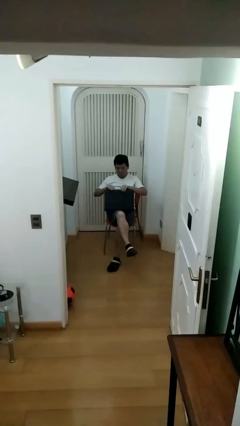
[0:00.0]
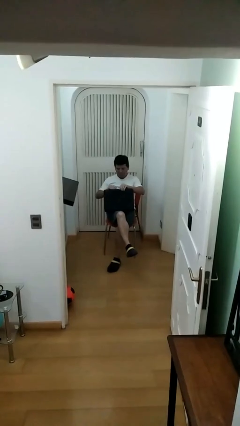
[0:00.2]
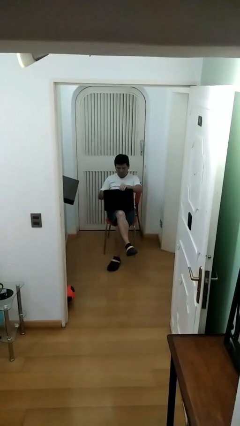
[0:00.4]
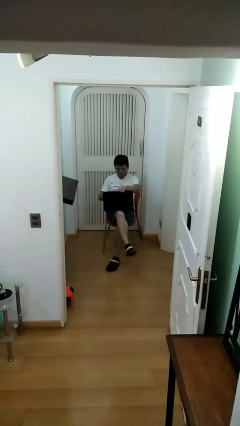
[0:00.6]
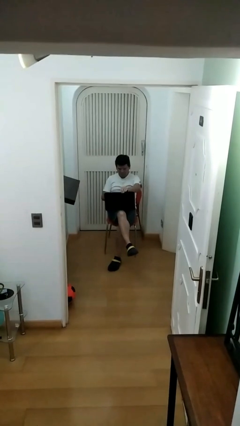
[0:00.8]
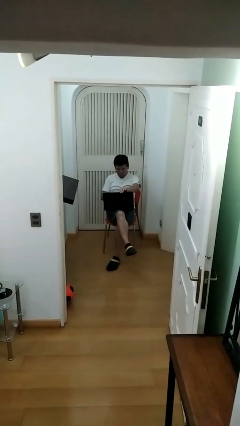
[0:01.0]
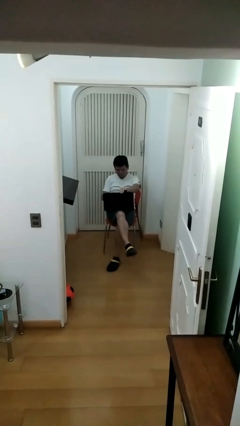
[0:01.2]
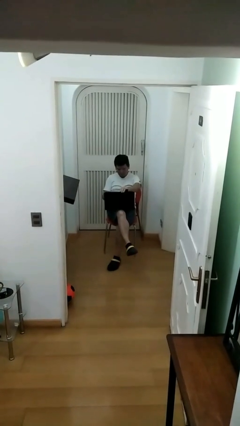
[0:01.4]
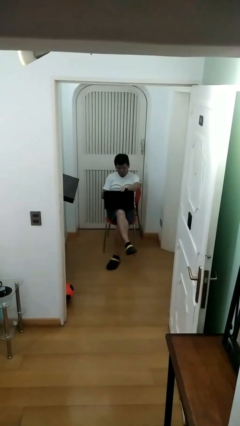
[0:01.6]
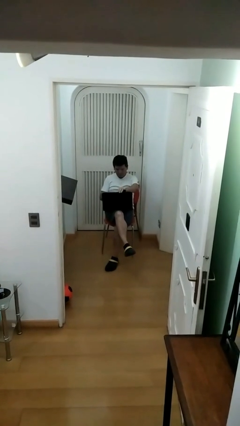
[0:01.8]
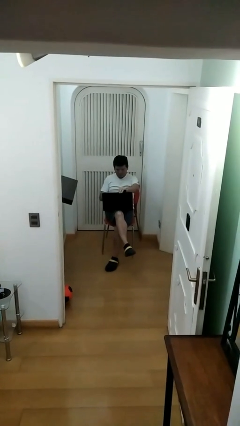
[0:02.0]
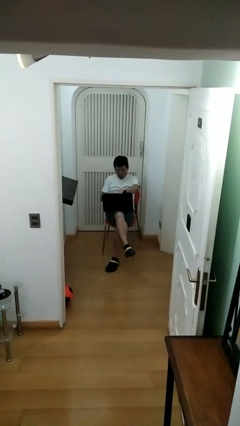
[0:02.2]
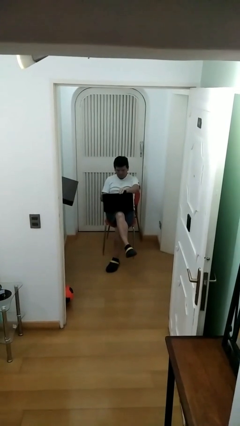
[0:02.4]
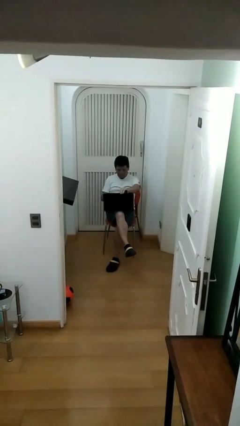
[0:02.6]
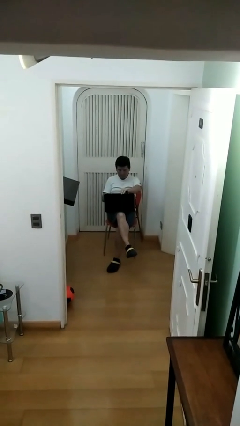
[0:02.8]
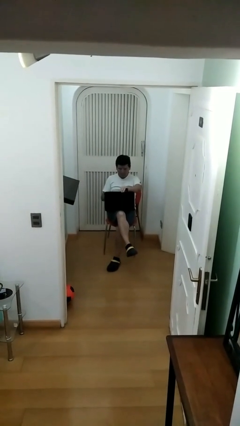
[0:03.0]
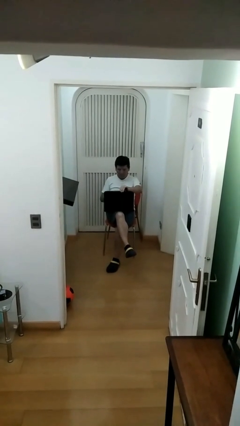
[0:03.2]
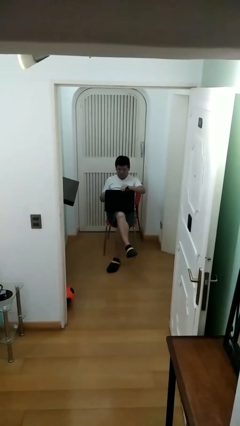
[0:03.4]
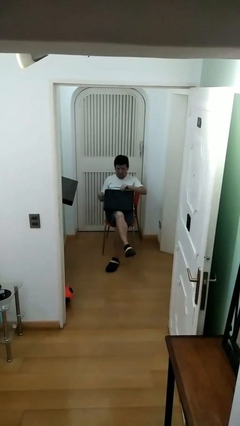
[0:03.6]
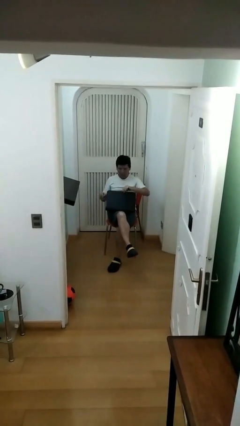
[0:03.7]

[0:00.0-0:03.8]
person interacts with laptop

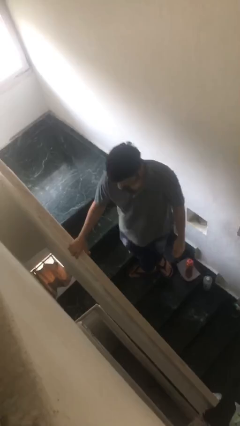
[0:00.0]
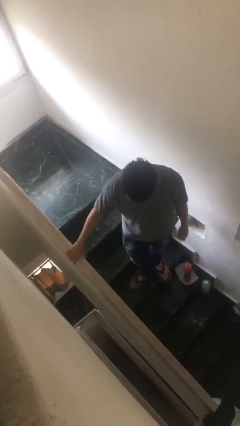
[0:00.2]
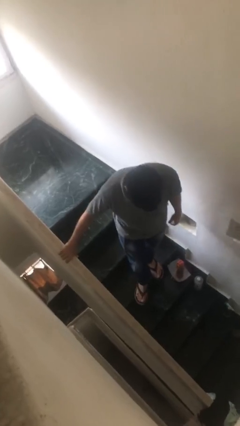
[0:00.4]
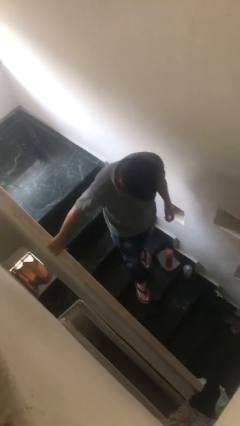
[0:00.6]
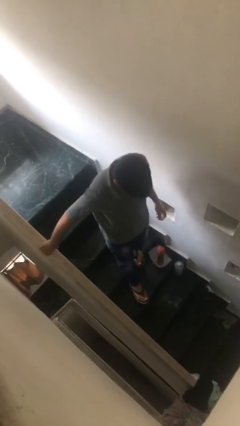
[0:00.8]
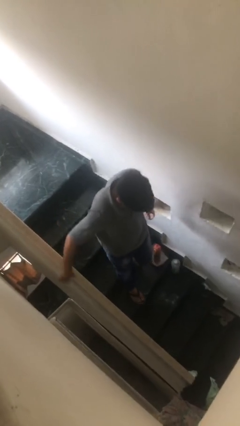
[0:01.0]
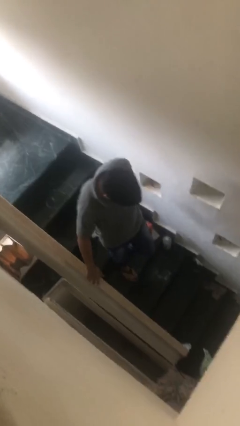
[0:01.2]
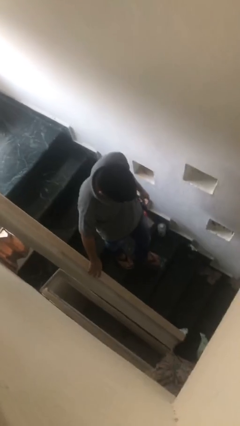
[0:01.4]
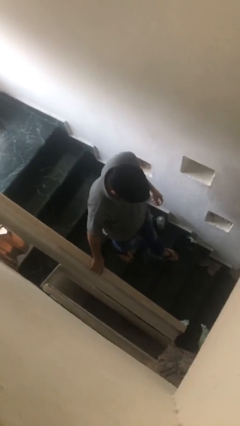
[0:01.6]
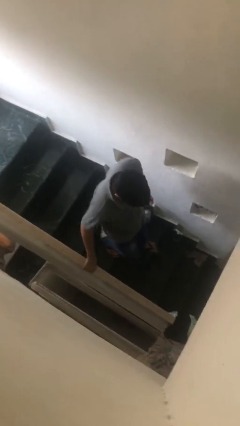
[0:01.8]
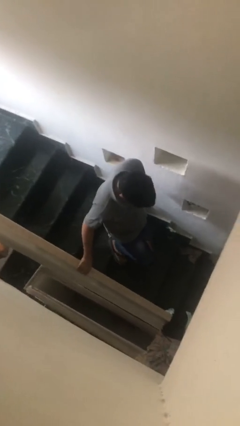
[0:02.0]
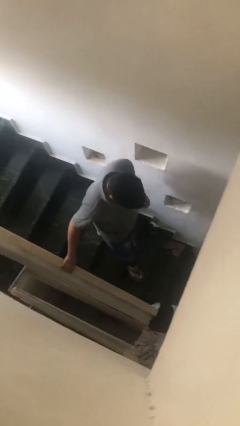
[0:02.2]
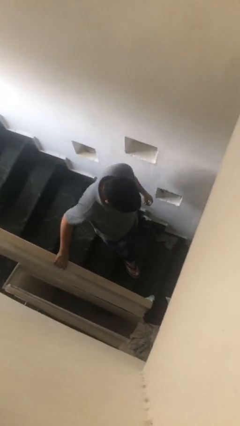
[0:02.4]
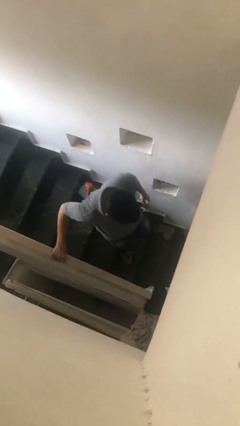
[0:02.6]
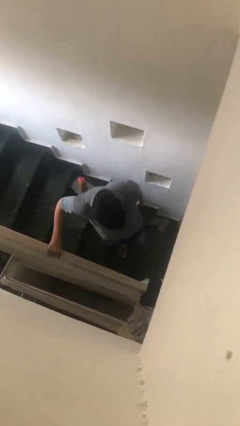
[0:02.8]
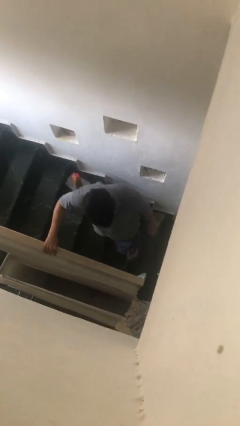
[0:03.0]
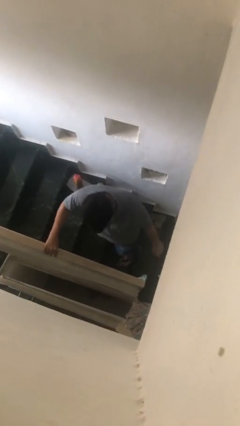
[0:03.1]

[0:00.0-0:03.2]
person climbs down stairs

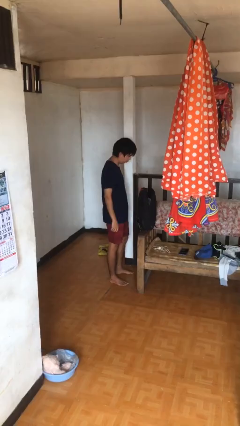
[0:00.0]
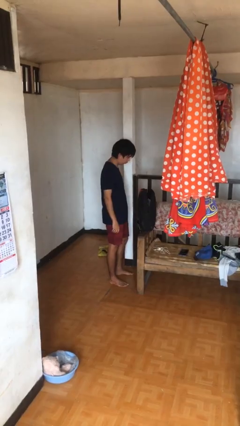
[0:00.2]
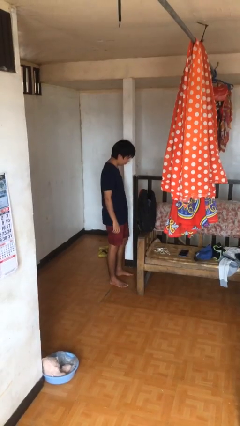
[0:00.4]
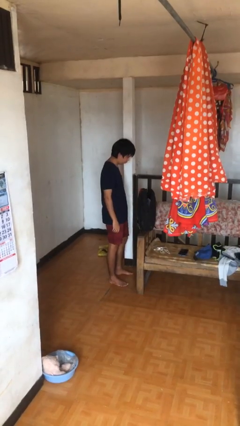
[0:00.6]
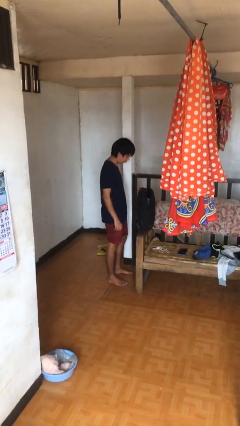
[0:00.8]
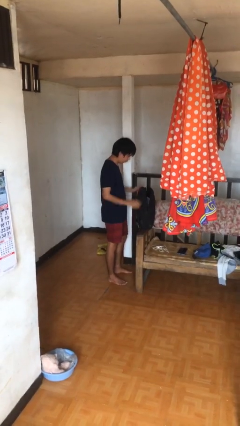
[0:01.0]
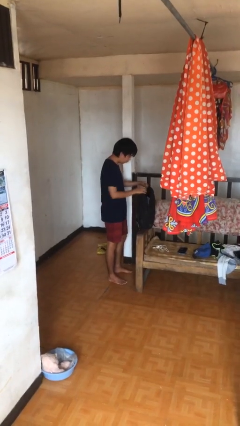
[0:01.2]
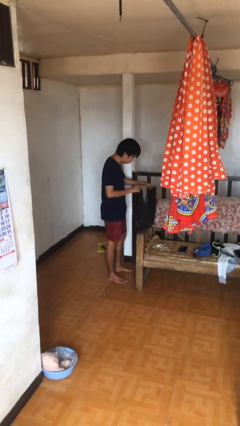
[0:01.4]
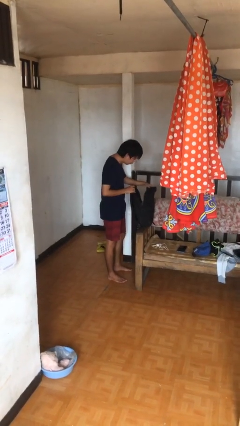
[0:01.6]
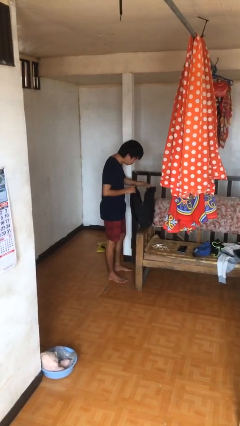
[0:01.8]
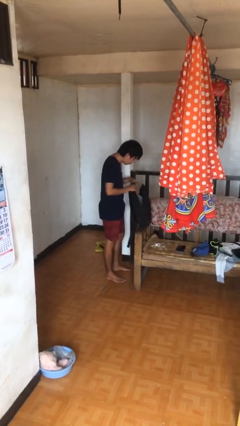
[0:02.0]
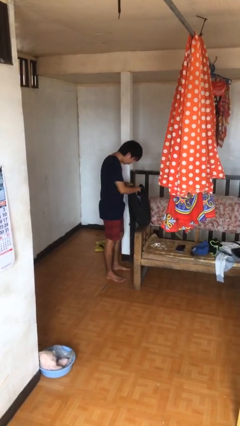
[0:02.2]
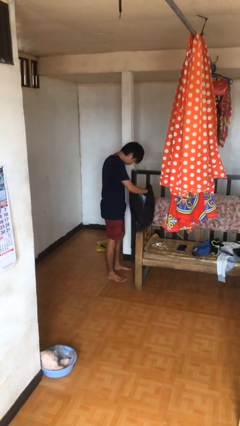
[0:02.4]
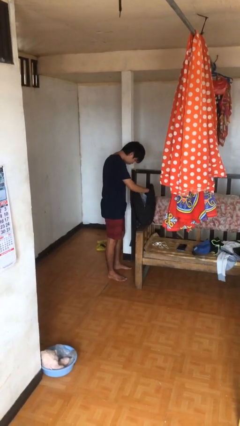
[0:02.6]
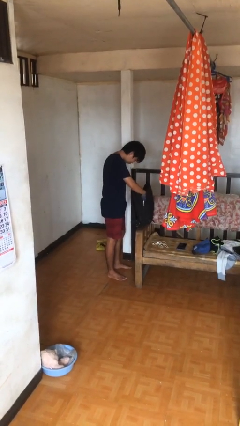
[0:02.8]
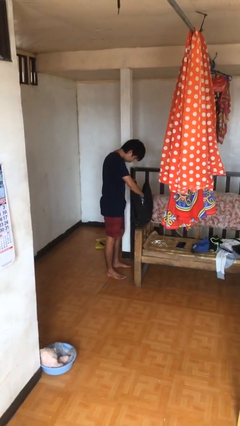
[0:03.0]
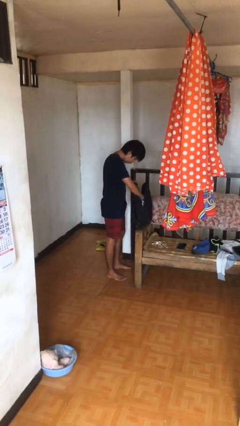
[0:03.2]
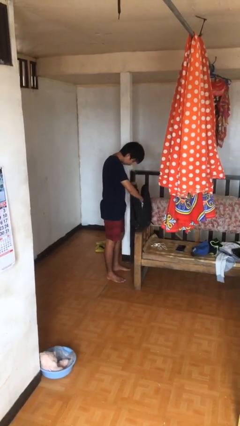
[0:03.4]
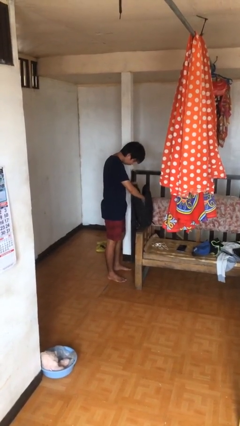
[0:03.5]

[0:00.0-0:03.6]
person searches in backpack

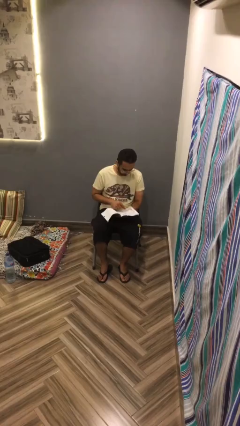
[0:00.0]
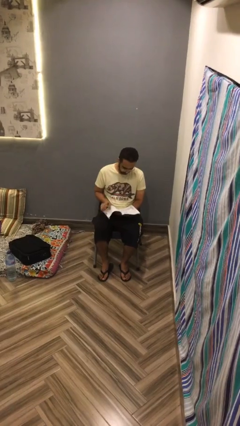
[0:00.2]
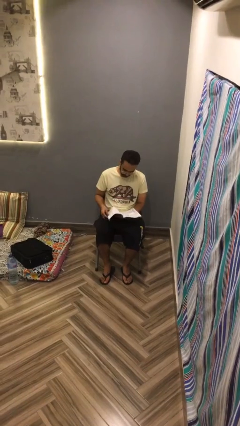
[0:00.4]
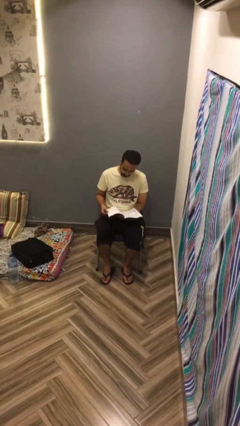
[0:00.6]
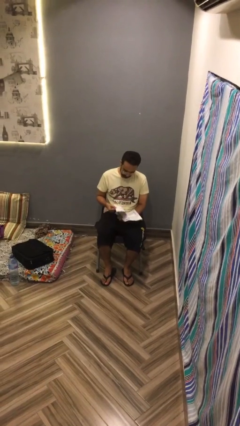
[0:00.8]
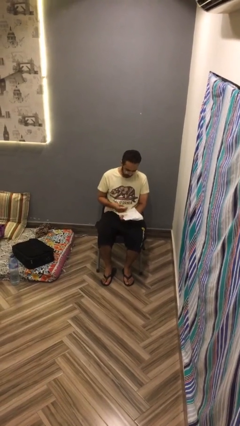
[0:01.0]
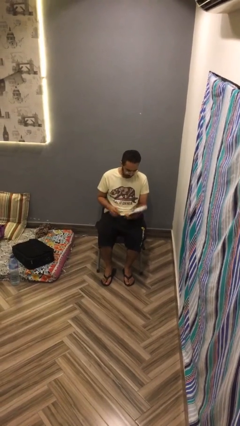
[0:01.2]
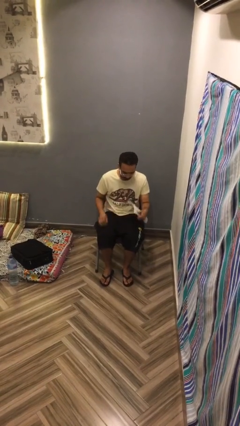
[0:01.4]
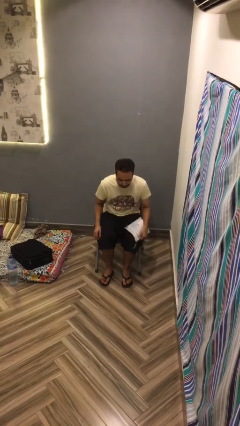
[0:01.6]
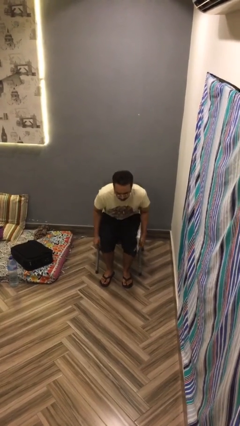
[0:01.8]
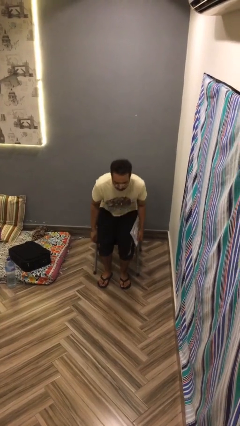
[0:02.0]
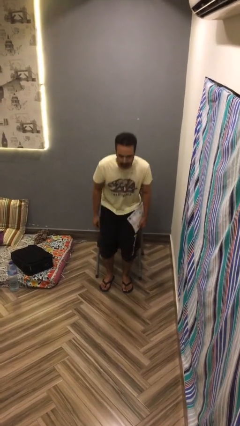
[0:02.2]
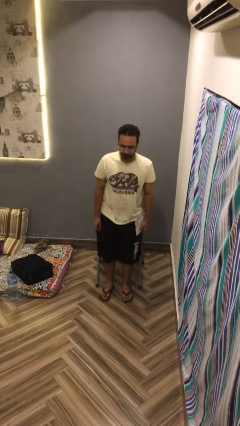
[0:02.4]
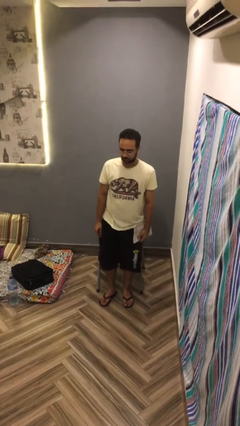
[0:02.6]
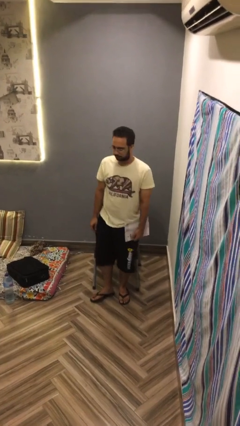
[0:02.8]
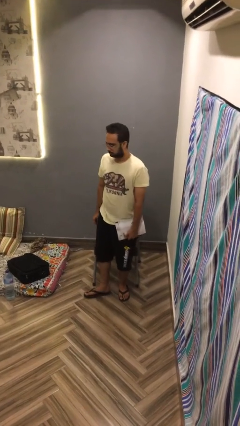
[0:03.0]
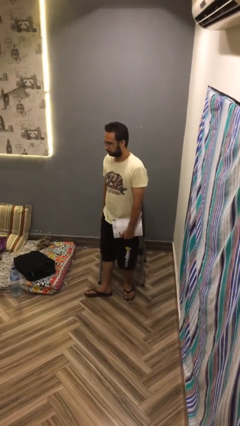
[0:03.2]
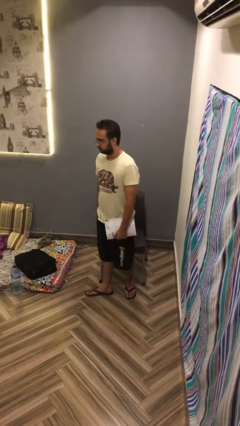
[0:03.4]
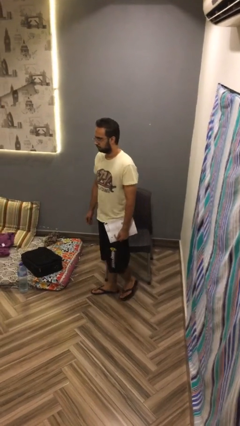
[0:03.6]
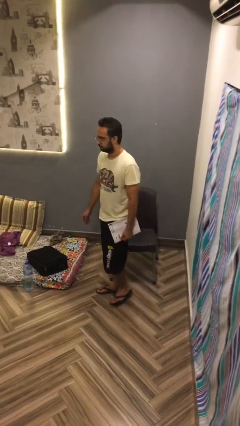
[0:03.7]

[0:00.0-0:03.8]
person stands up

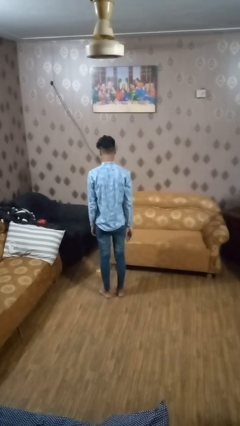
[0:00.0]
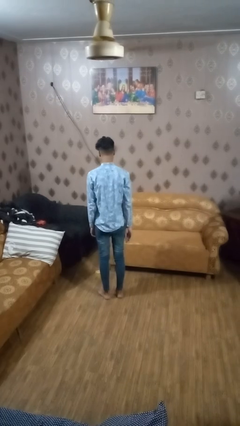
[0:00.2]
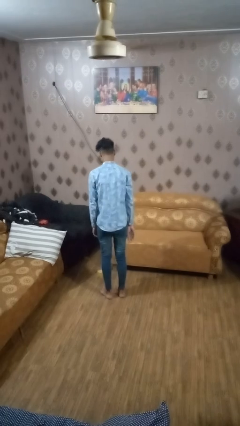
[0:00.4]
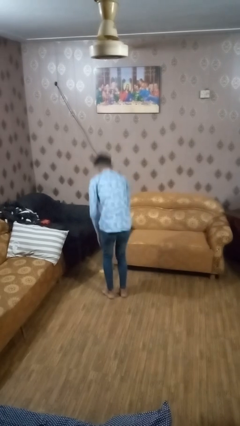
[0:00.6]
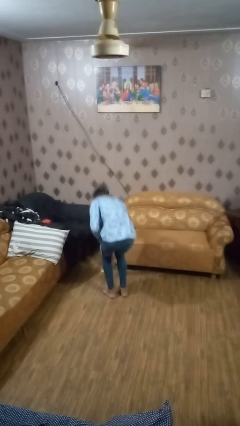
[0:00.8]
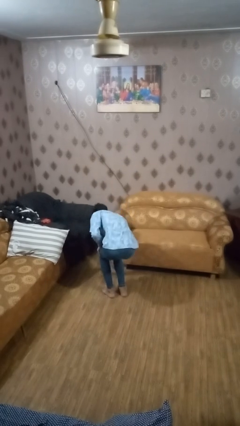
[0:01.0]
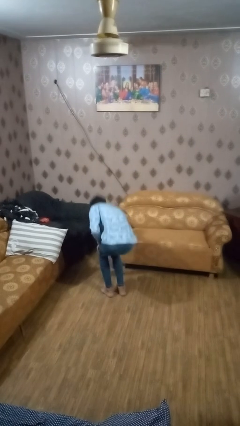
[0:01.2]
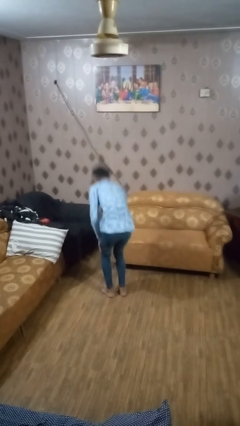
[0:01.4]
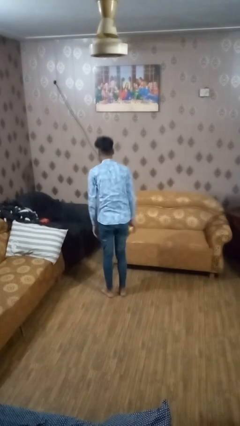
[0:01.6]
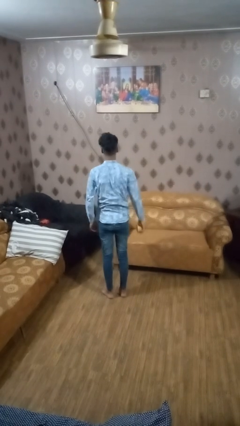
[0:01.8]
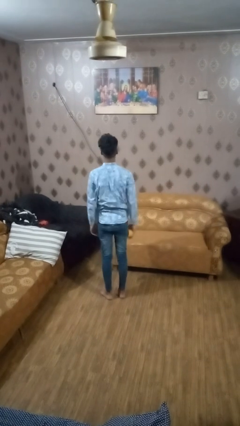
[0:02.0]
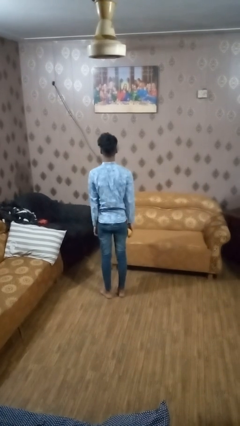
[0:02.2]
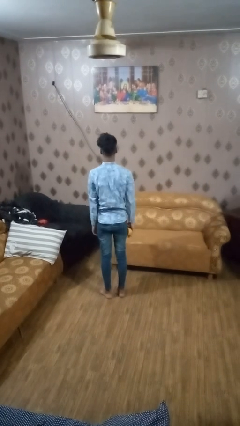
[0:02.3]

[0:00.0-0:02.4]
person picks up object from floor

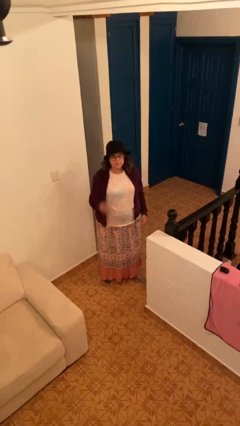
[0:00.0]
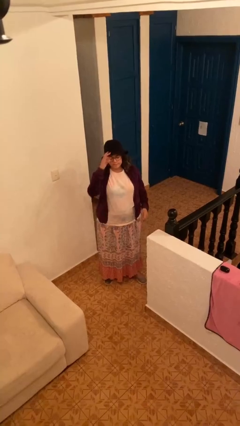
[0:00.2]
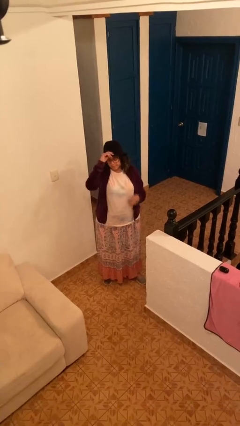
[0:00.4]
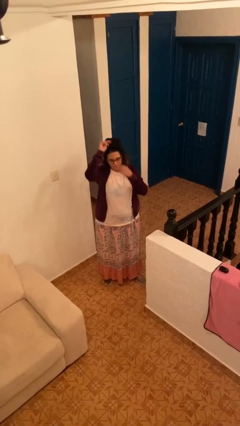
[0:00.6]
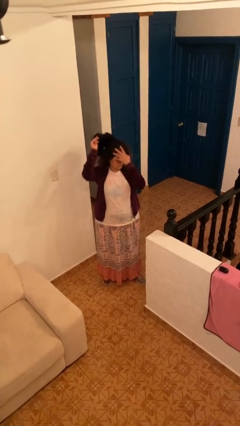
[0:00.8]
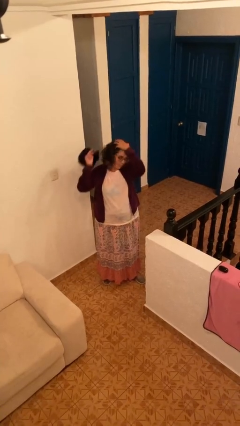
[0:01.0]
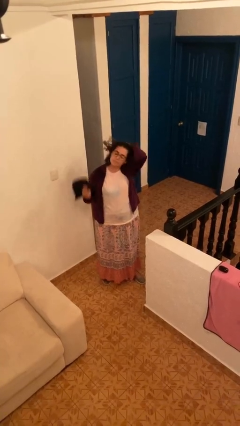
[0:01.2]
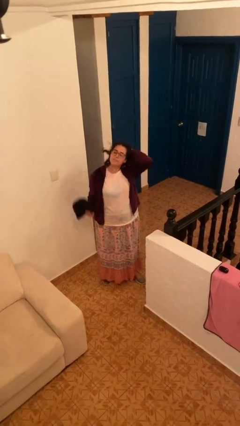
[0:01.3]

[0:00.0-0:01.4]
person takes off hat
